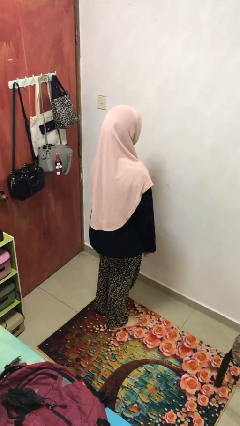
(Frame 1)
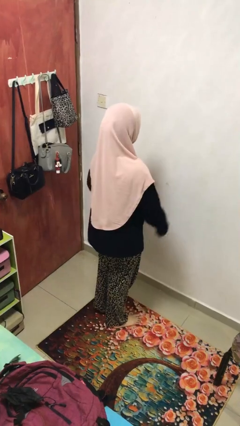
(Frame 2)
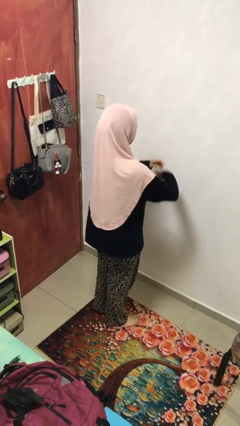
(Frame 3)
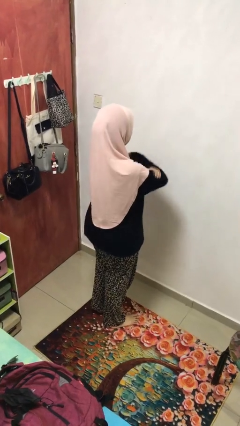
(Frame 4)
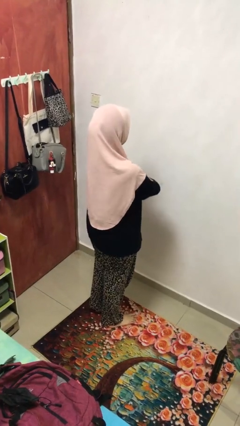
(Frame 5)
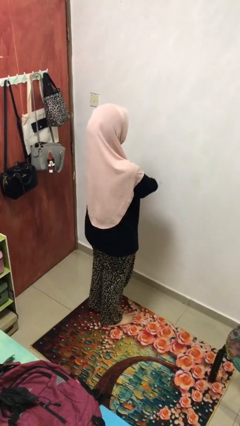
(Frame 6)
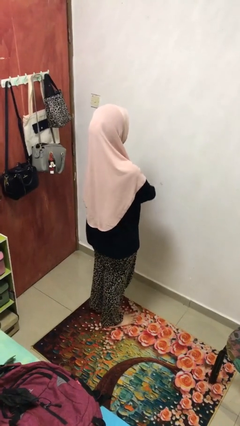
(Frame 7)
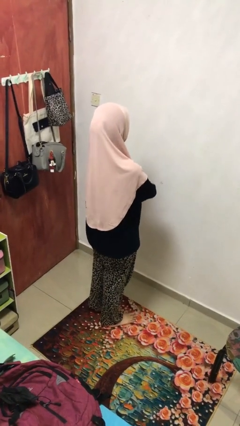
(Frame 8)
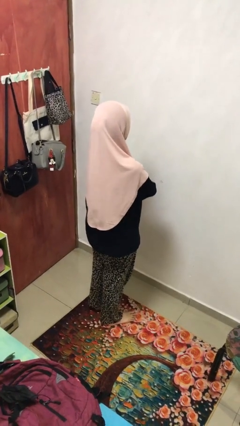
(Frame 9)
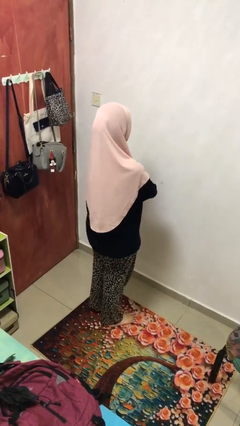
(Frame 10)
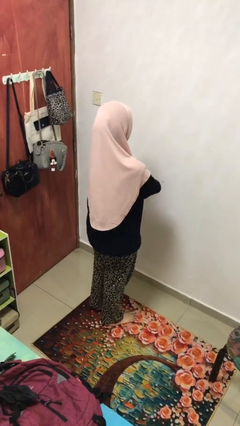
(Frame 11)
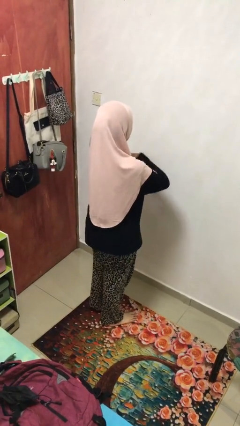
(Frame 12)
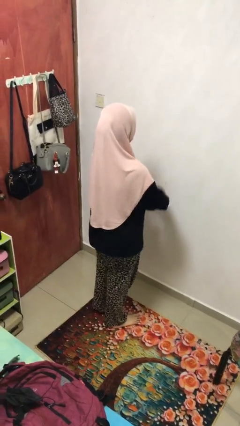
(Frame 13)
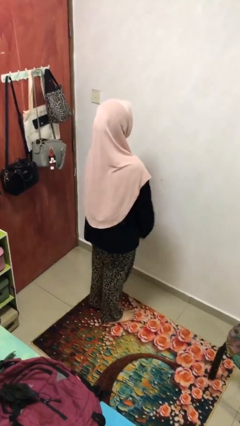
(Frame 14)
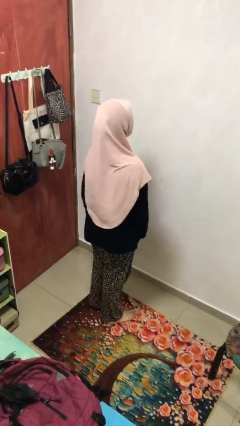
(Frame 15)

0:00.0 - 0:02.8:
person crosses arms

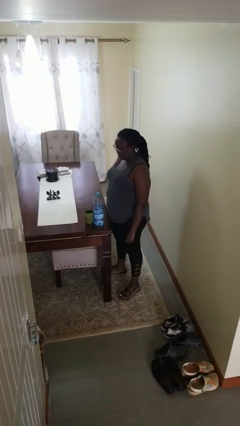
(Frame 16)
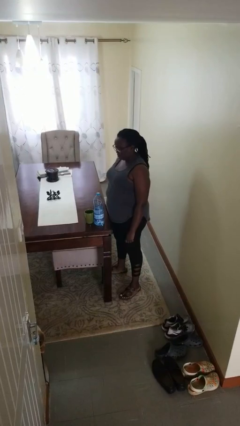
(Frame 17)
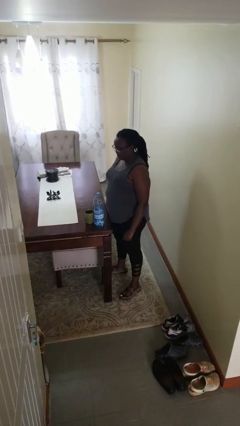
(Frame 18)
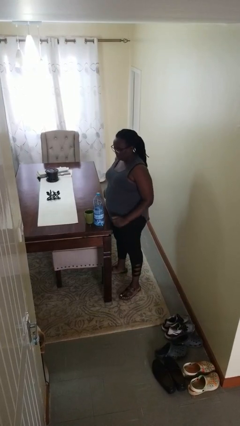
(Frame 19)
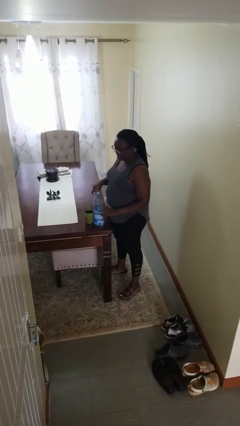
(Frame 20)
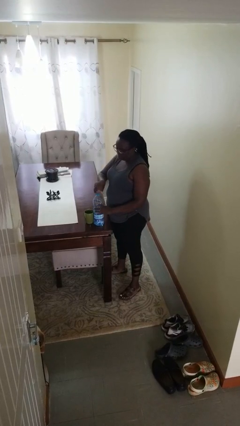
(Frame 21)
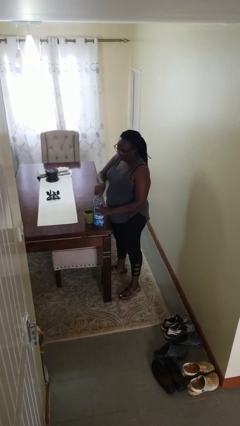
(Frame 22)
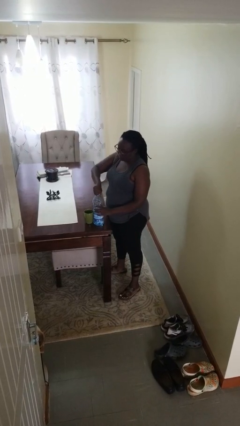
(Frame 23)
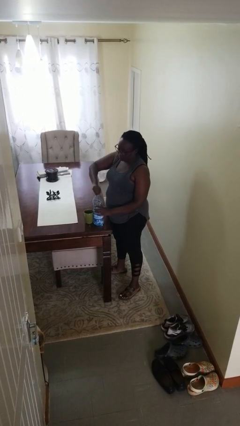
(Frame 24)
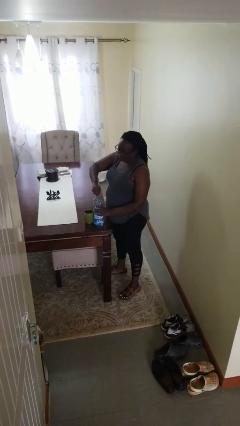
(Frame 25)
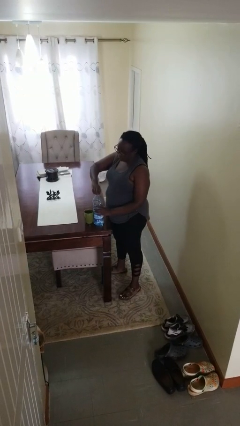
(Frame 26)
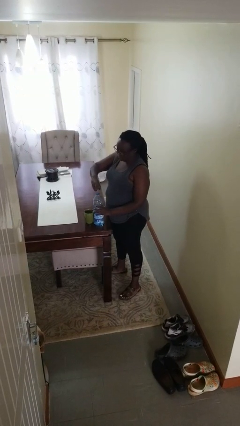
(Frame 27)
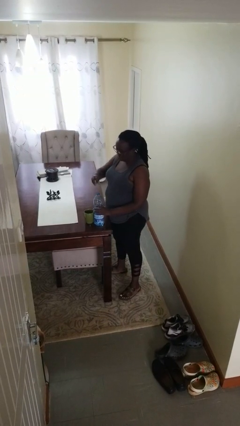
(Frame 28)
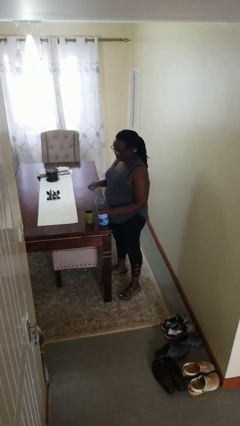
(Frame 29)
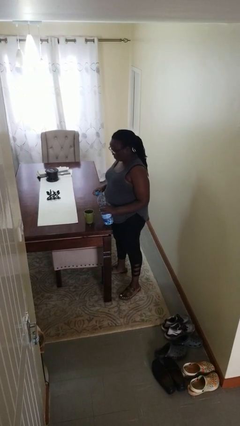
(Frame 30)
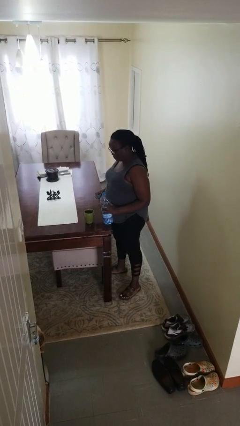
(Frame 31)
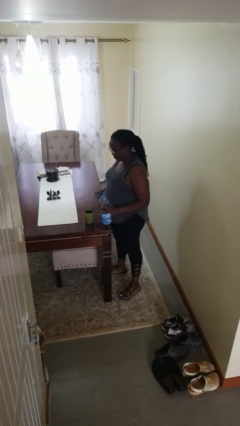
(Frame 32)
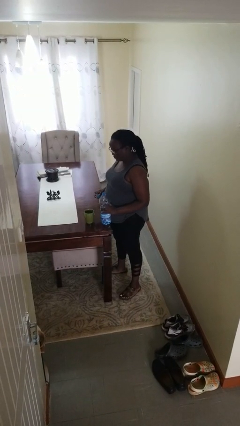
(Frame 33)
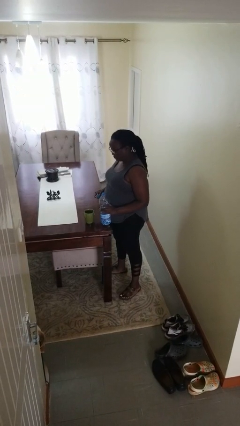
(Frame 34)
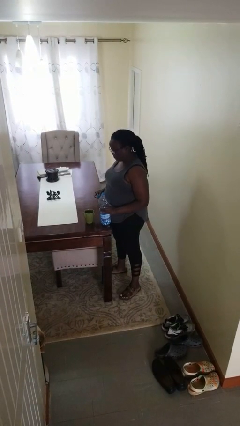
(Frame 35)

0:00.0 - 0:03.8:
person unscrews lid from bottle

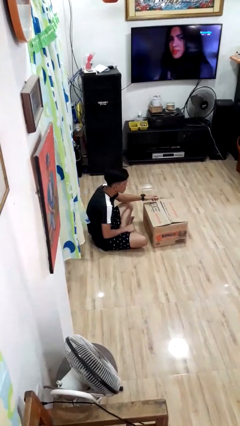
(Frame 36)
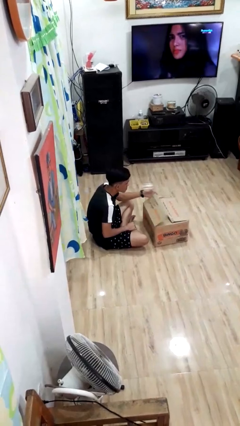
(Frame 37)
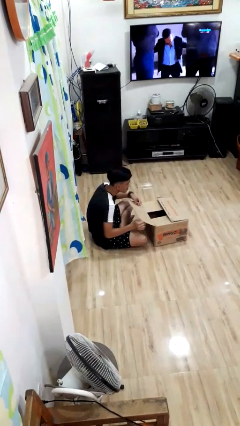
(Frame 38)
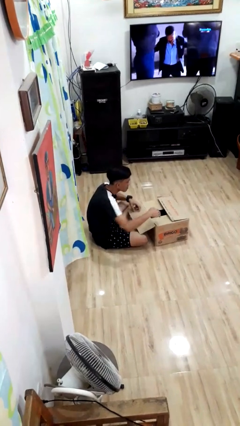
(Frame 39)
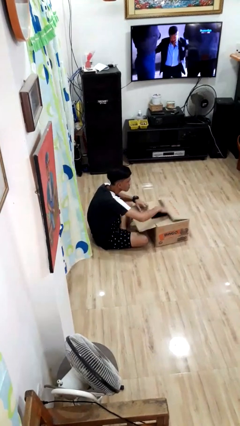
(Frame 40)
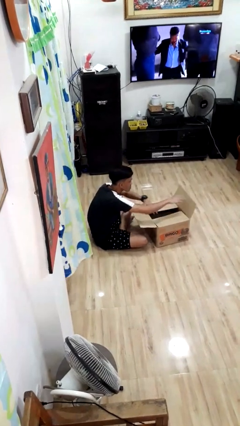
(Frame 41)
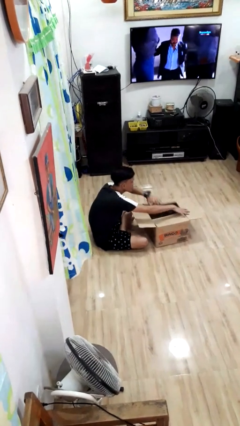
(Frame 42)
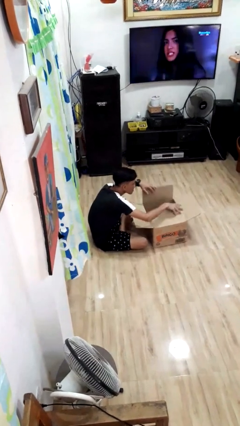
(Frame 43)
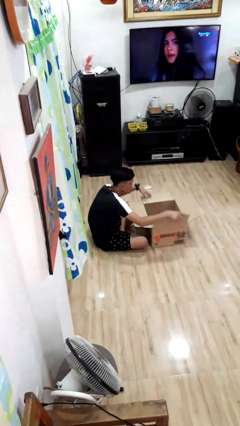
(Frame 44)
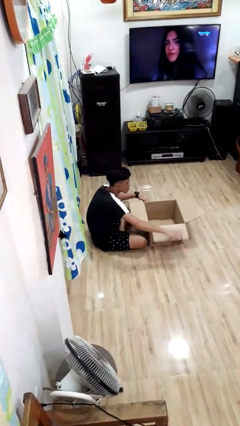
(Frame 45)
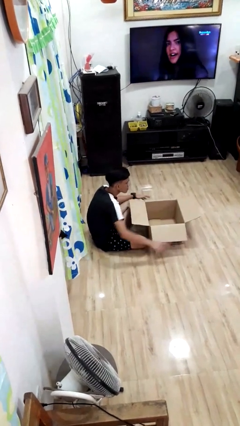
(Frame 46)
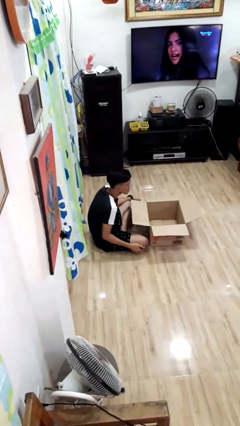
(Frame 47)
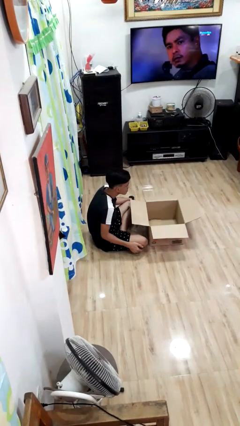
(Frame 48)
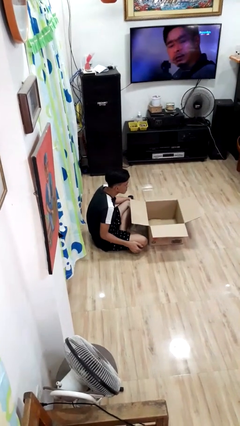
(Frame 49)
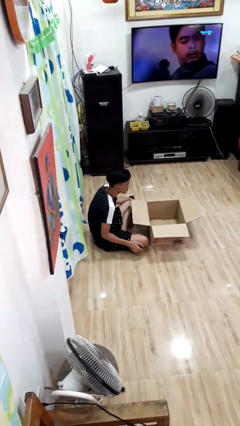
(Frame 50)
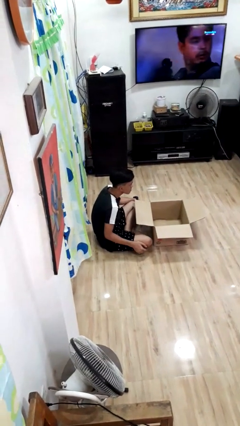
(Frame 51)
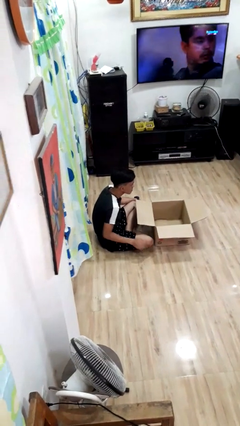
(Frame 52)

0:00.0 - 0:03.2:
person opens box

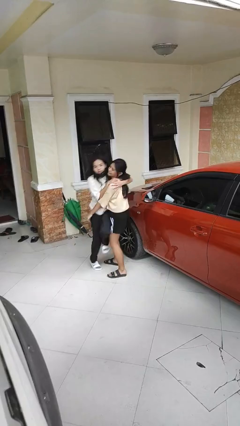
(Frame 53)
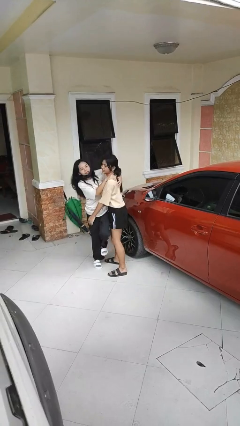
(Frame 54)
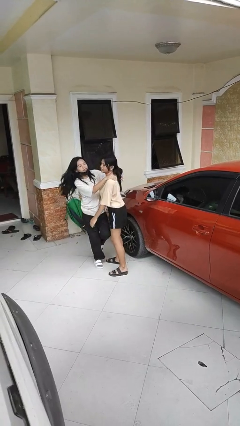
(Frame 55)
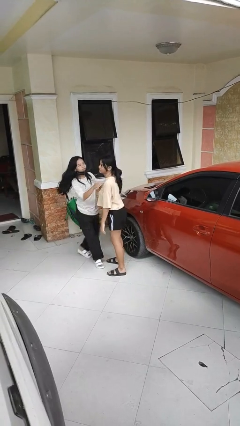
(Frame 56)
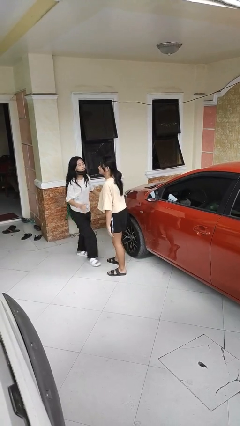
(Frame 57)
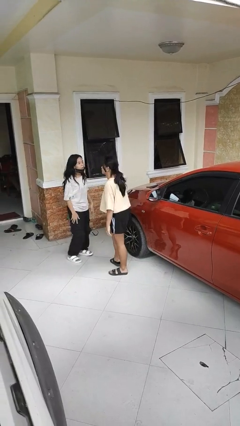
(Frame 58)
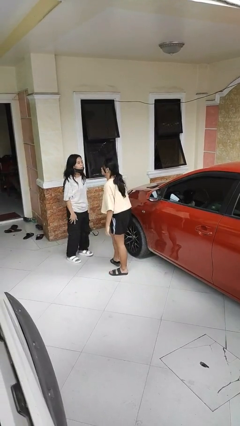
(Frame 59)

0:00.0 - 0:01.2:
person puts down person

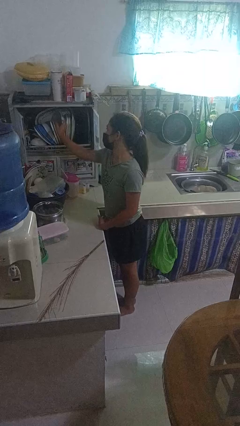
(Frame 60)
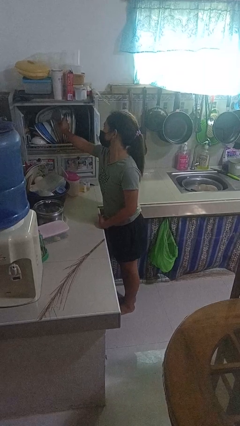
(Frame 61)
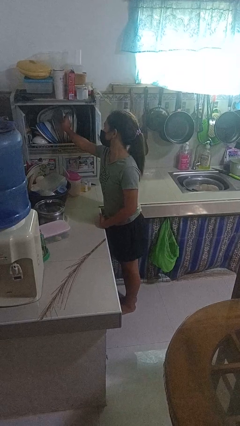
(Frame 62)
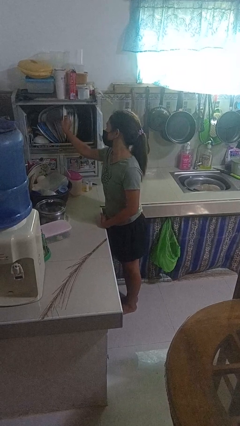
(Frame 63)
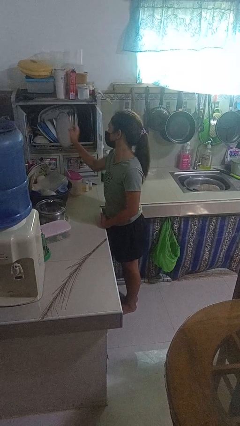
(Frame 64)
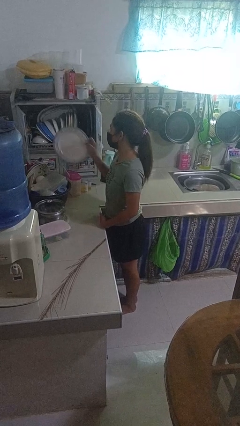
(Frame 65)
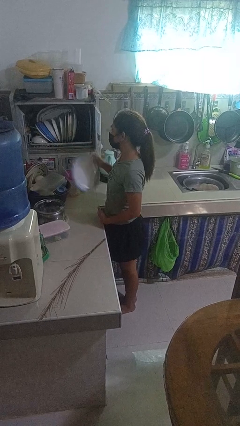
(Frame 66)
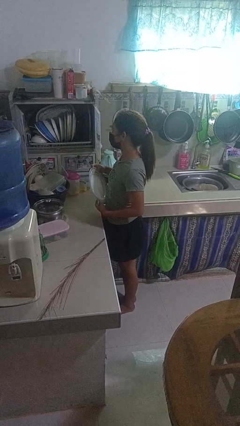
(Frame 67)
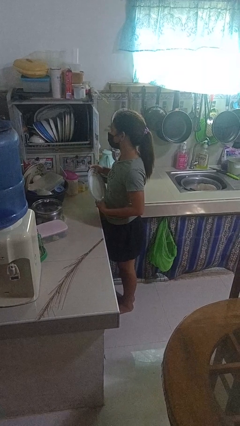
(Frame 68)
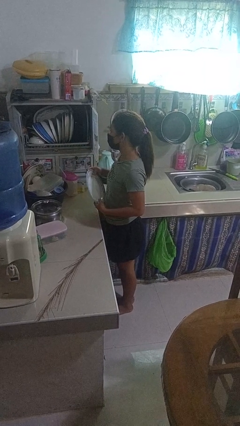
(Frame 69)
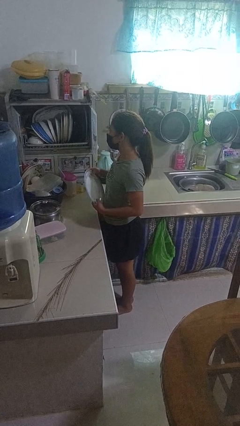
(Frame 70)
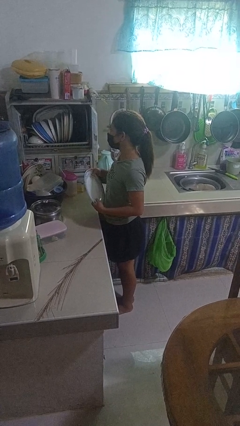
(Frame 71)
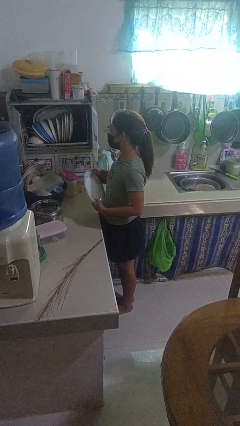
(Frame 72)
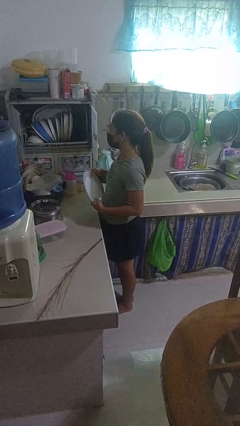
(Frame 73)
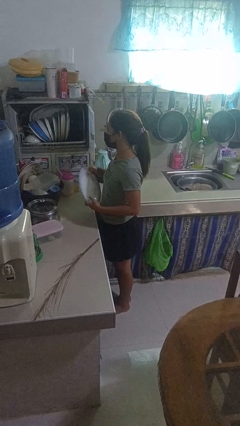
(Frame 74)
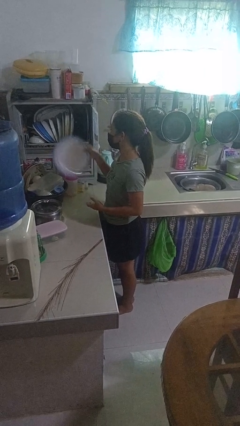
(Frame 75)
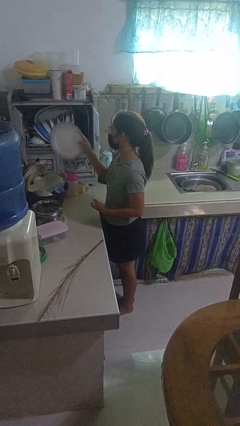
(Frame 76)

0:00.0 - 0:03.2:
person takes object from kitchen drawer

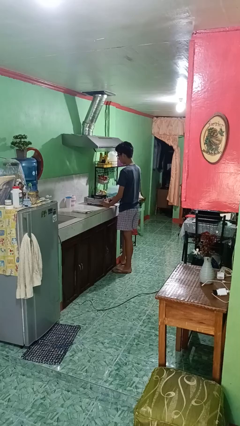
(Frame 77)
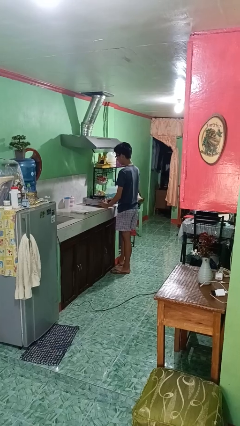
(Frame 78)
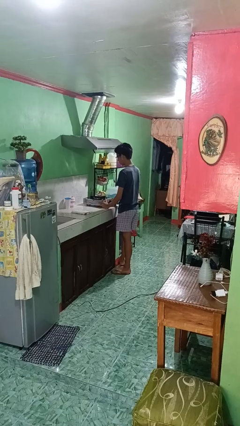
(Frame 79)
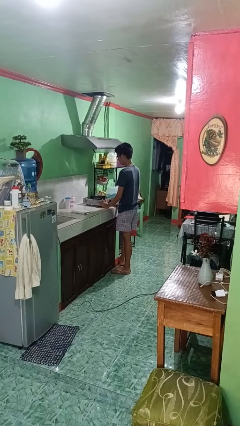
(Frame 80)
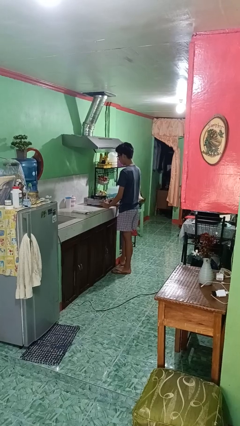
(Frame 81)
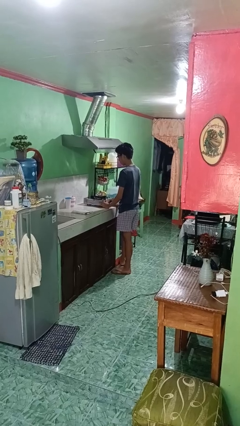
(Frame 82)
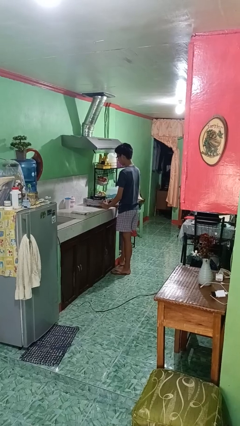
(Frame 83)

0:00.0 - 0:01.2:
person turns off stovetop

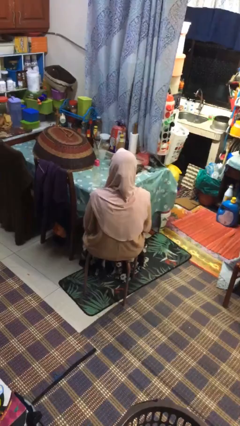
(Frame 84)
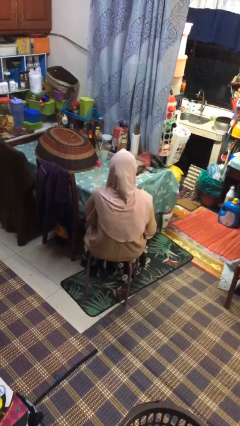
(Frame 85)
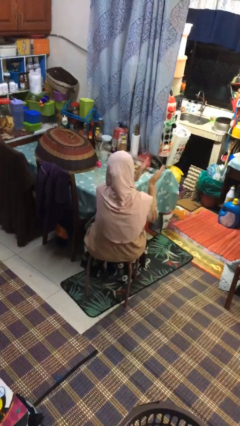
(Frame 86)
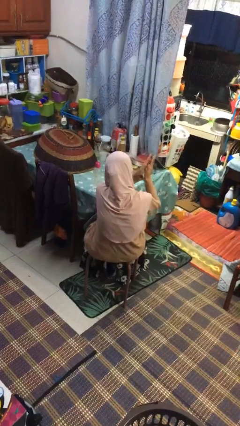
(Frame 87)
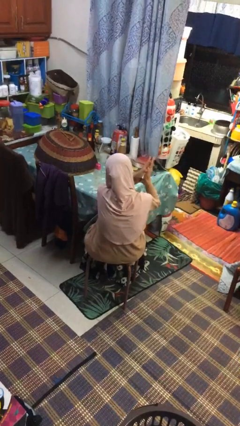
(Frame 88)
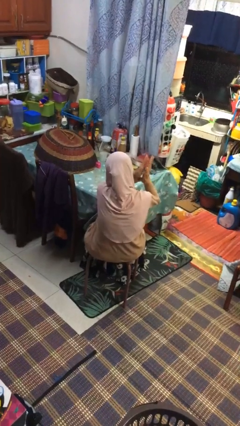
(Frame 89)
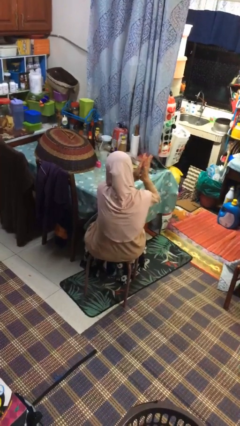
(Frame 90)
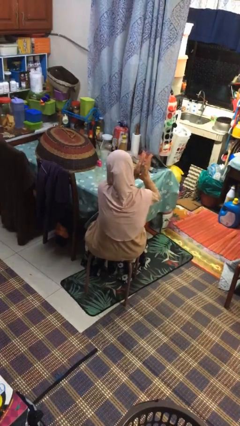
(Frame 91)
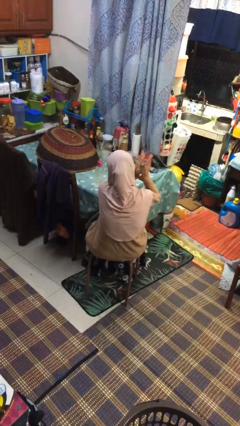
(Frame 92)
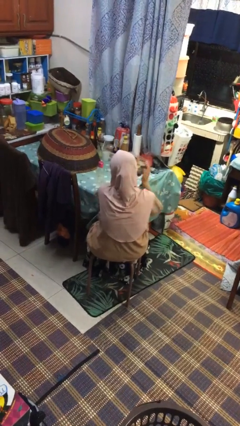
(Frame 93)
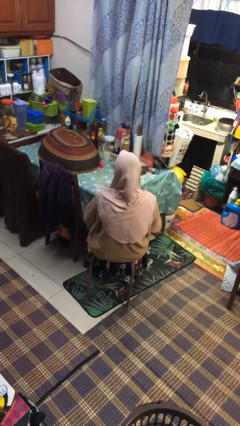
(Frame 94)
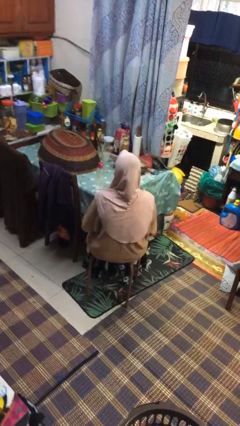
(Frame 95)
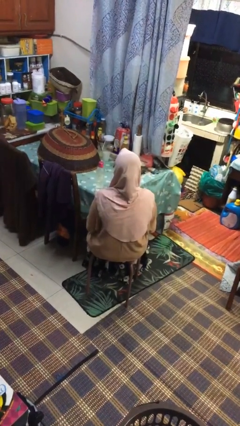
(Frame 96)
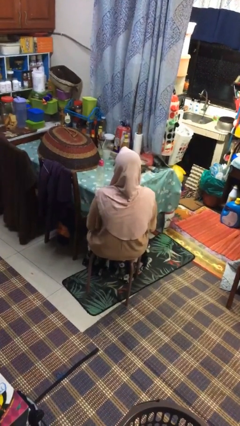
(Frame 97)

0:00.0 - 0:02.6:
person claps hands
